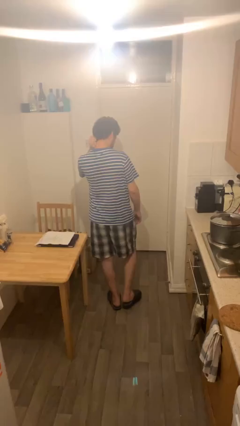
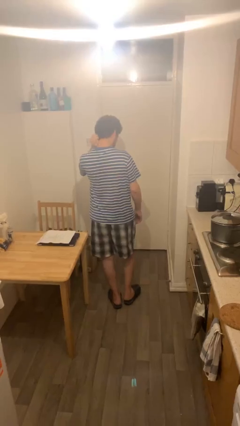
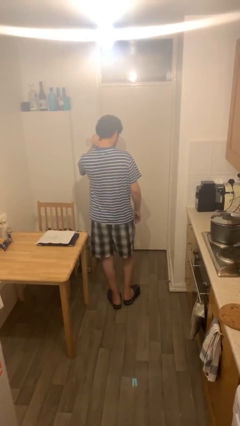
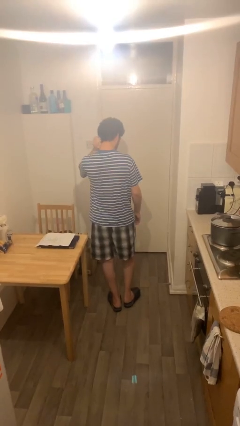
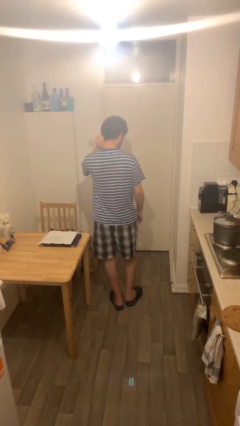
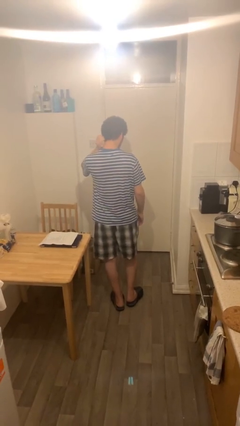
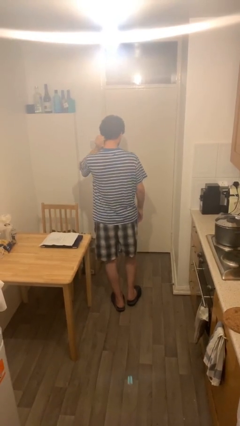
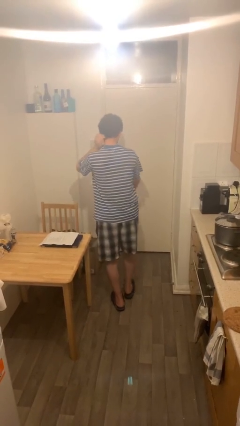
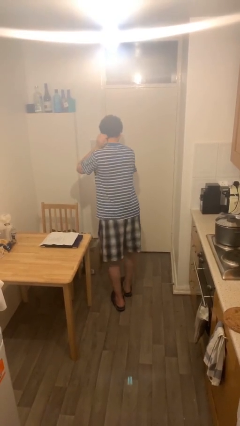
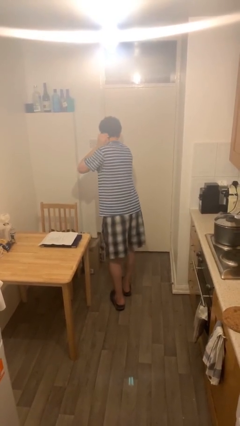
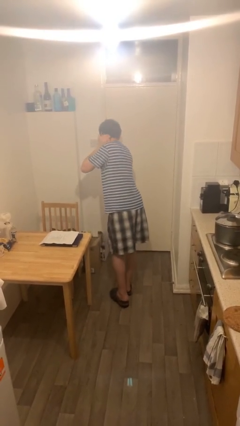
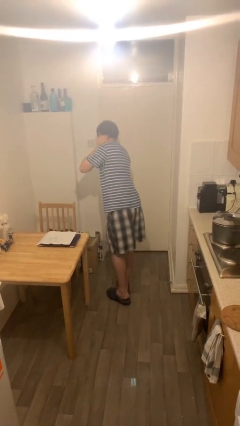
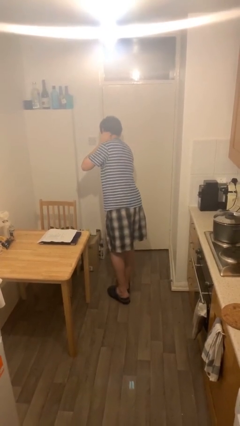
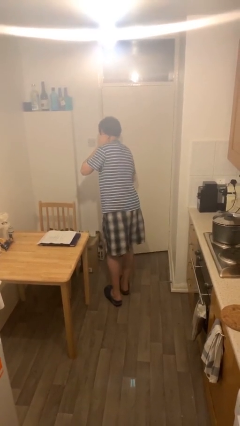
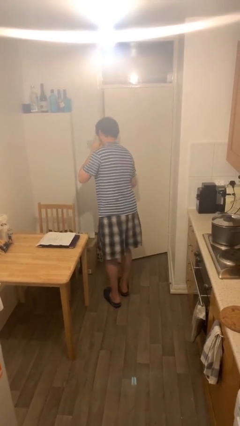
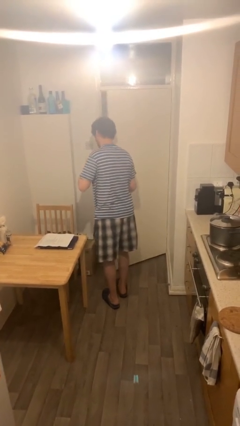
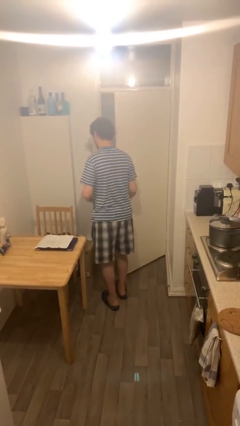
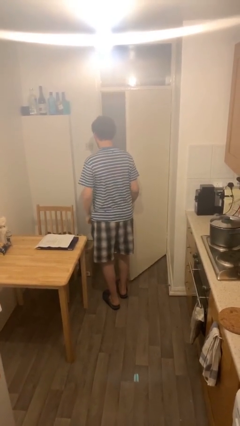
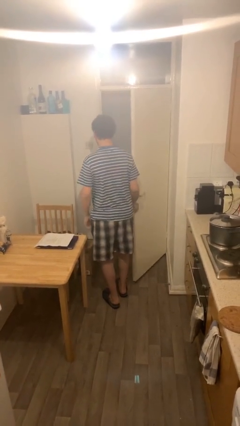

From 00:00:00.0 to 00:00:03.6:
person opens facility door

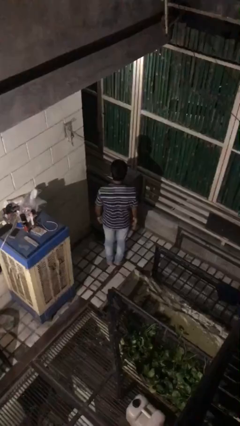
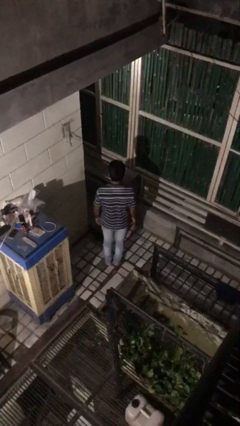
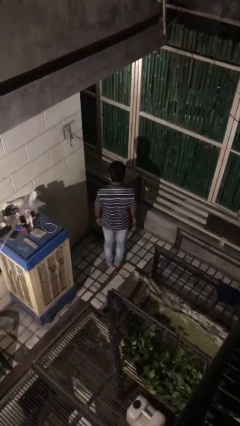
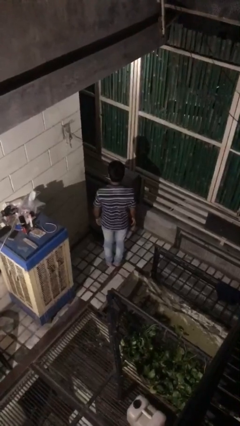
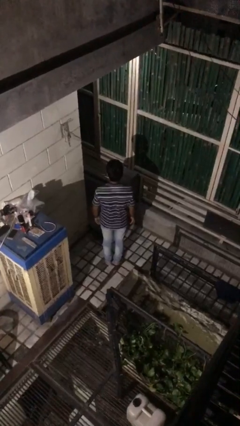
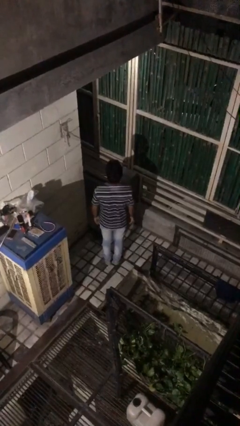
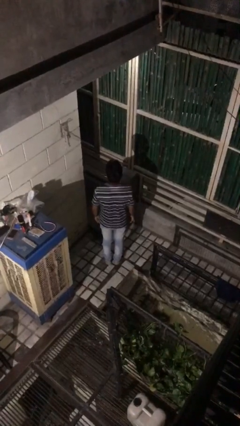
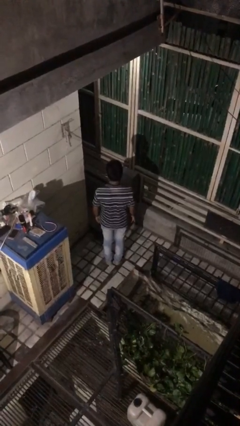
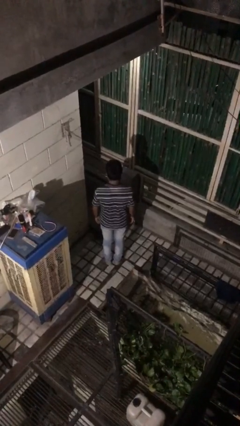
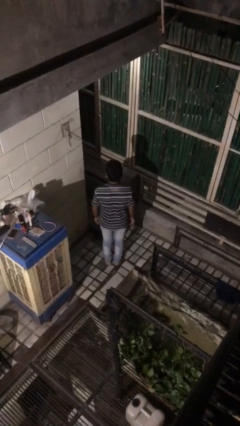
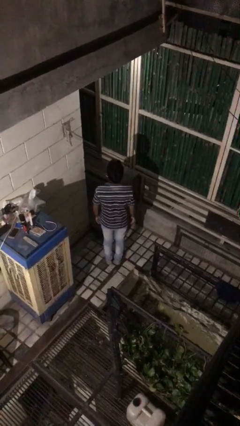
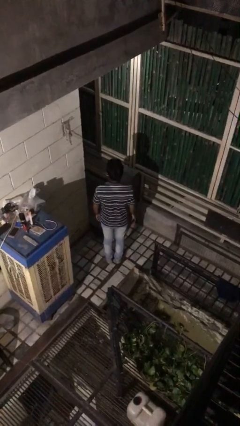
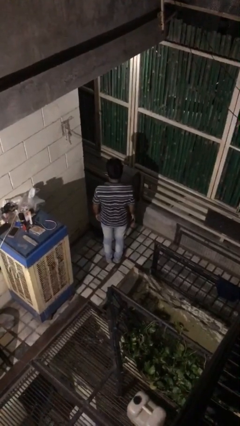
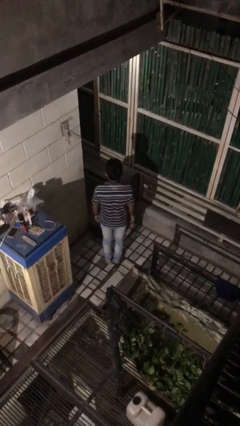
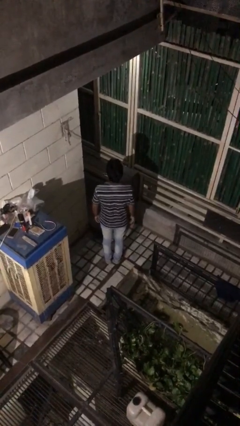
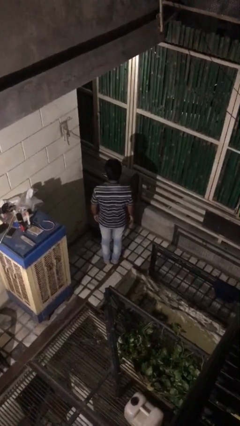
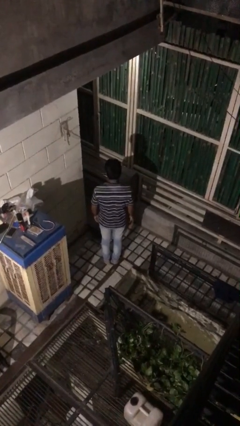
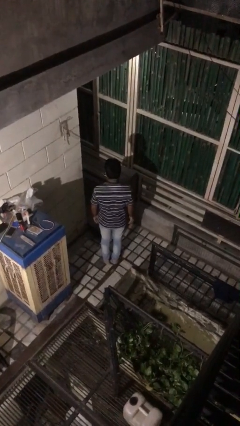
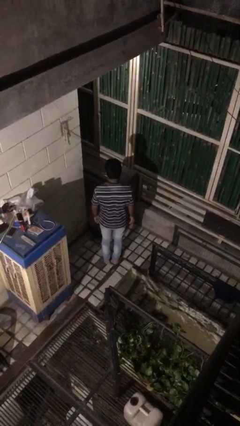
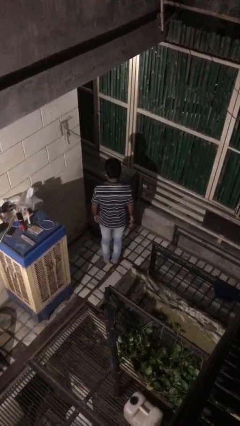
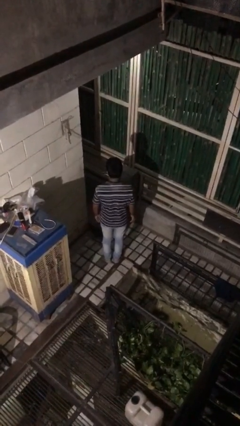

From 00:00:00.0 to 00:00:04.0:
person nods head

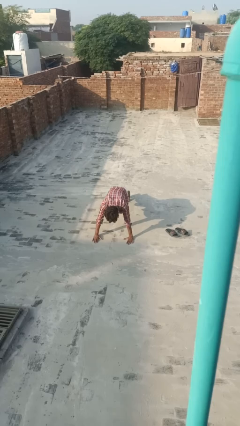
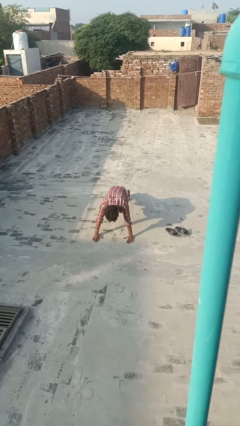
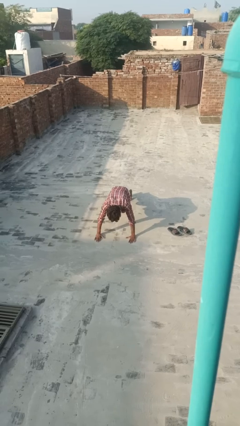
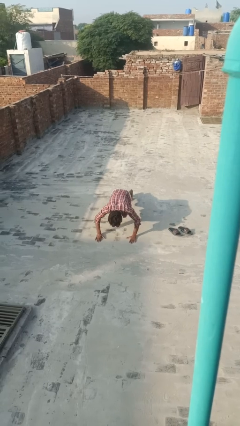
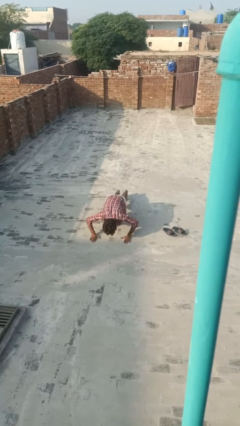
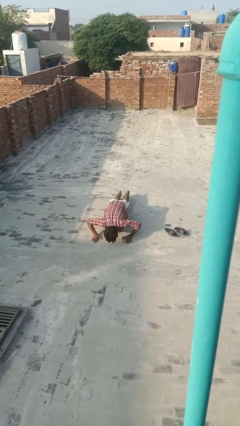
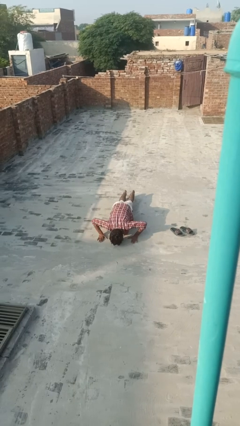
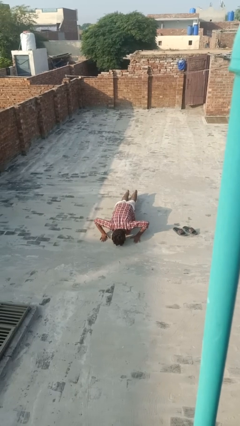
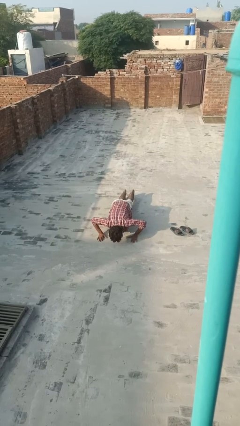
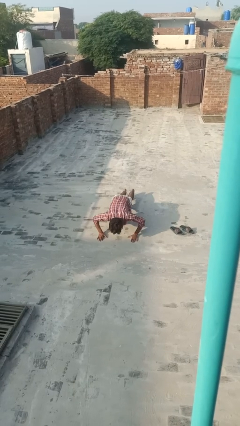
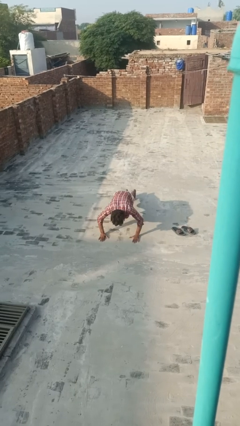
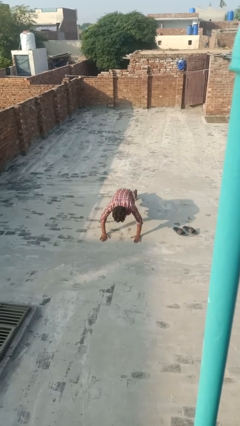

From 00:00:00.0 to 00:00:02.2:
person exercises with pushup

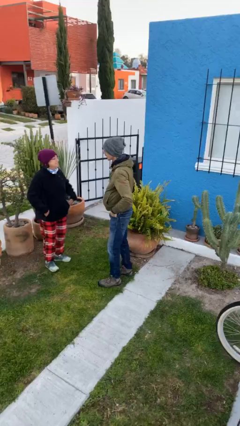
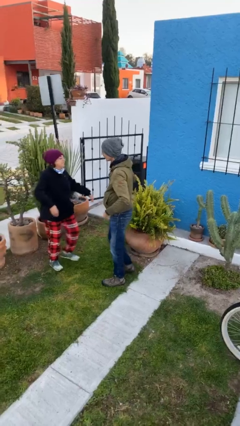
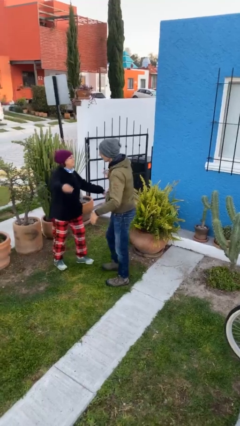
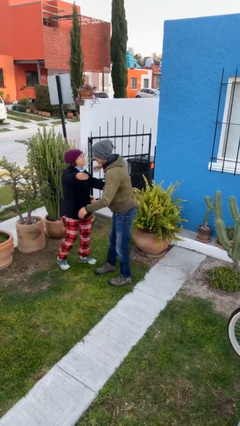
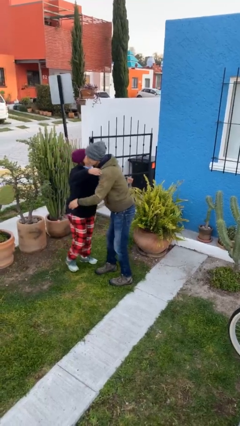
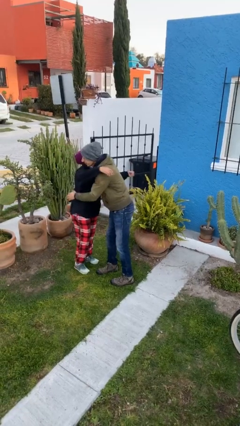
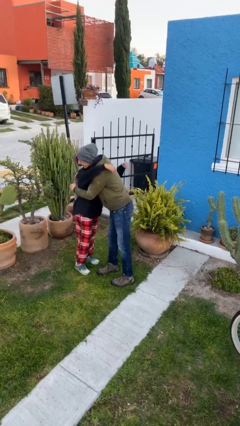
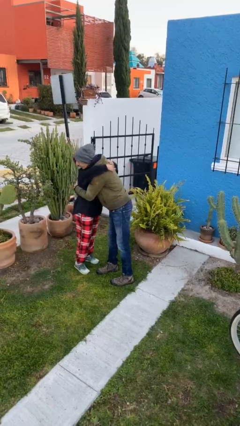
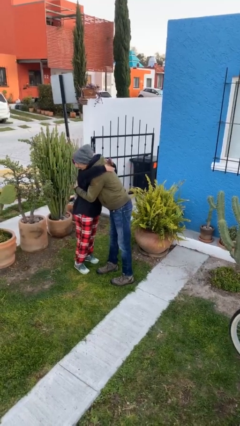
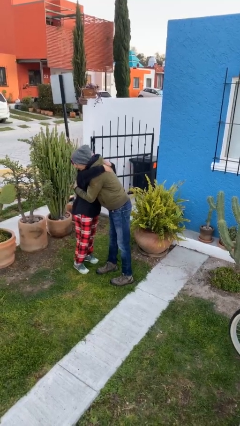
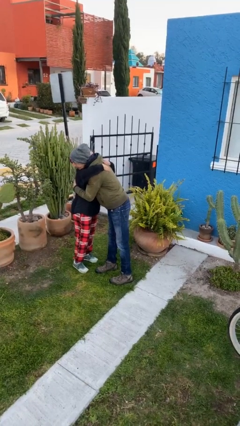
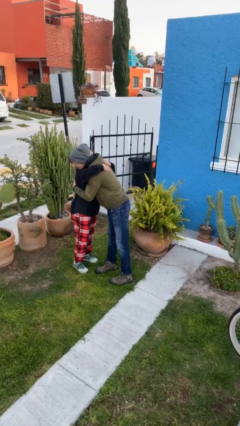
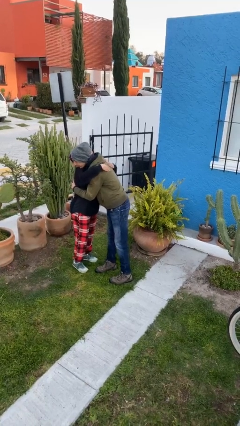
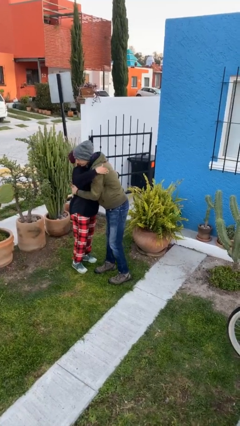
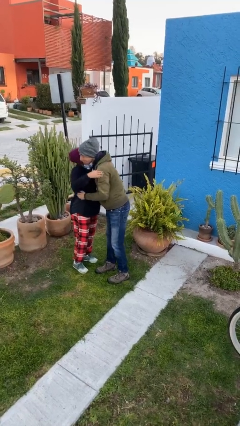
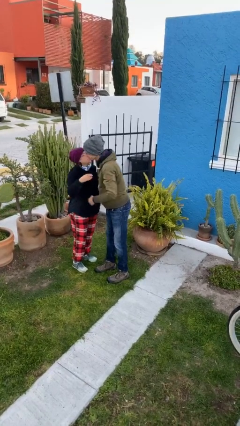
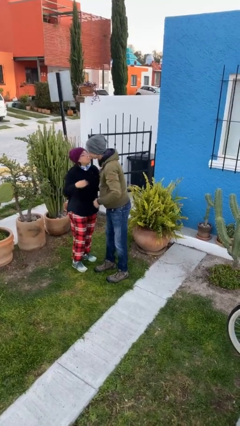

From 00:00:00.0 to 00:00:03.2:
person embraces person

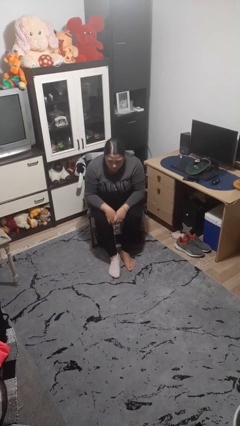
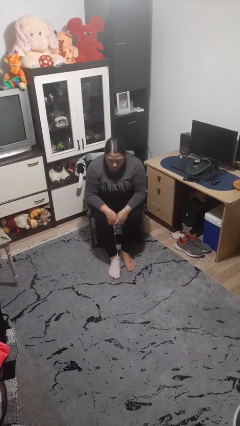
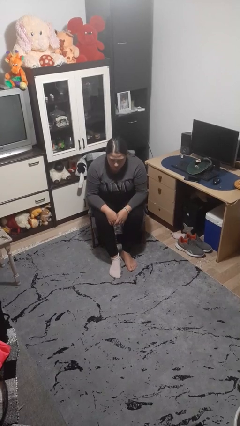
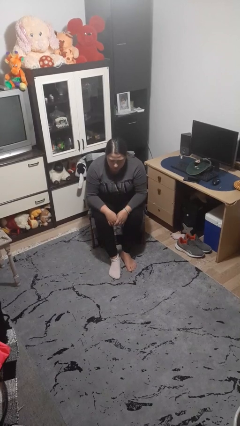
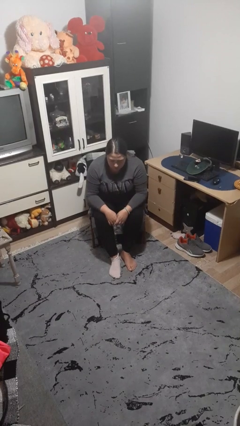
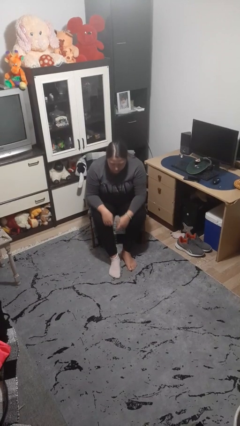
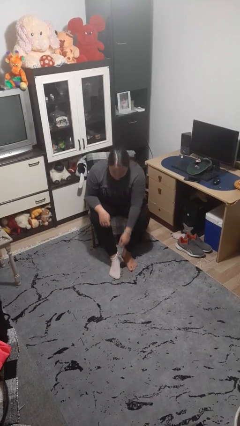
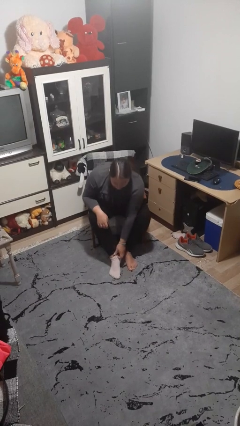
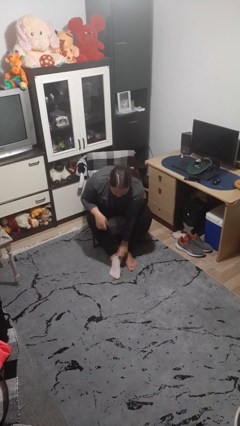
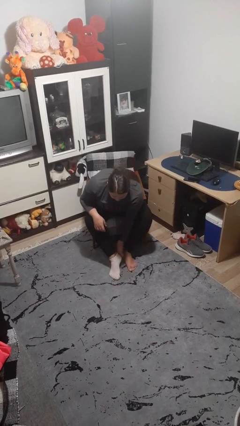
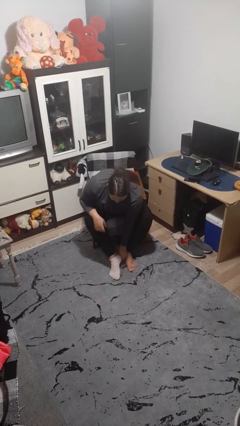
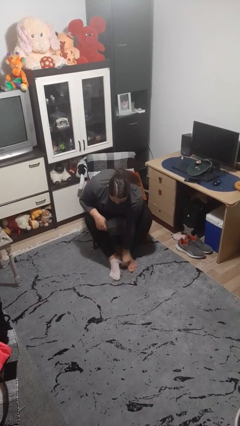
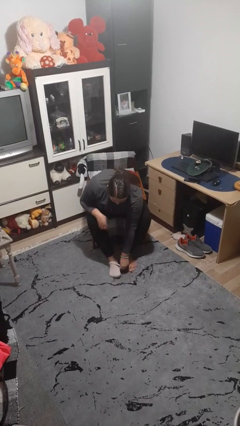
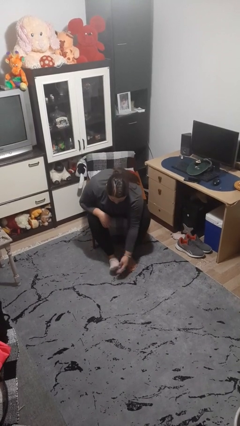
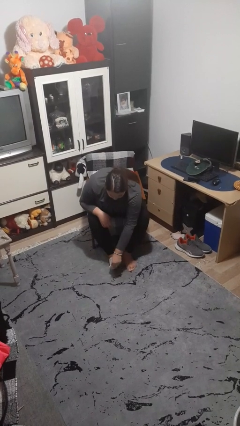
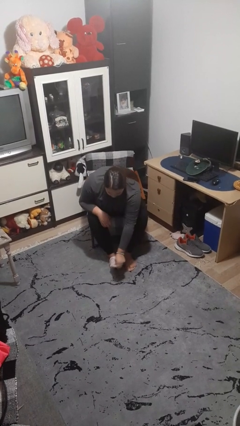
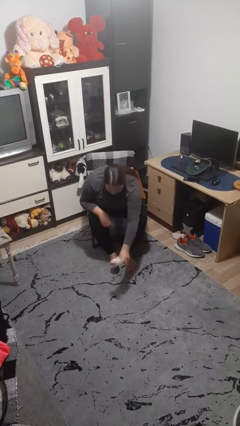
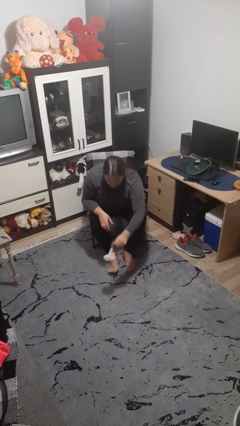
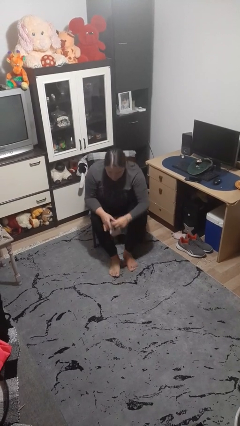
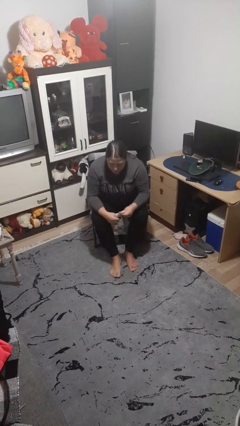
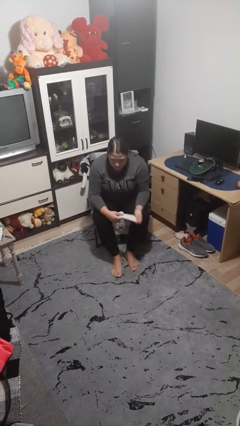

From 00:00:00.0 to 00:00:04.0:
person takes off socks

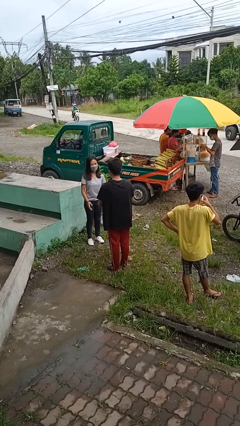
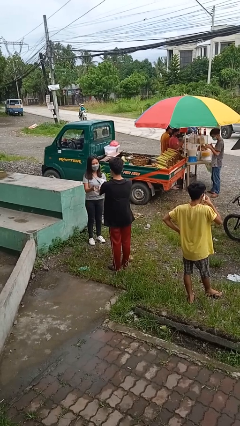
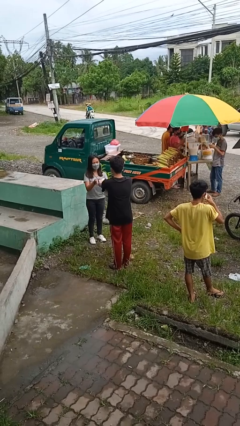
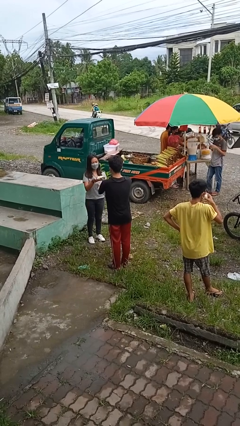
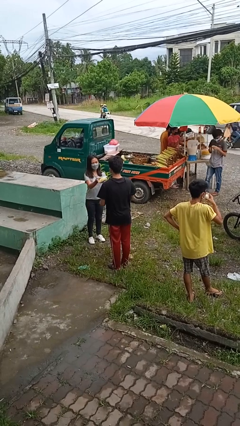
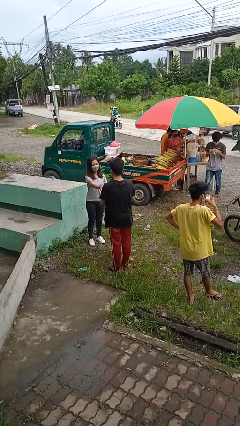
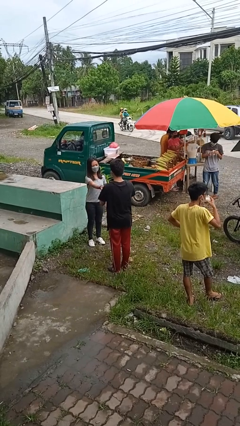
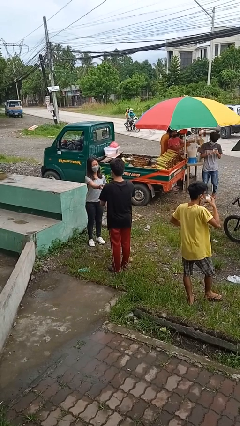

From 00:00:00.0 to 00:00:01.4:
person transfers object to person
